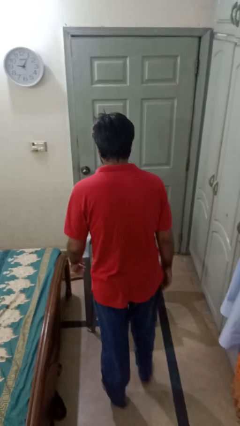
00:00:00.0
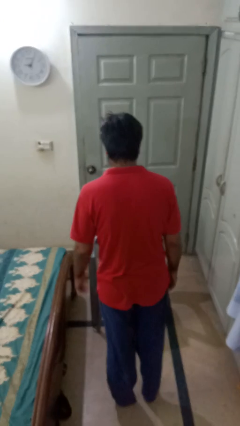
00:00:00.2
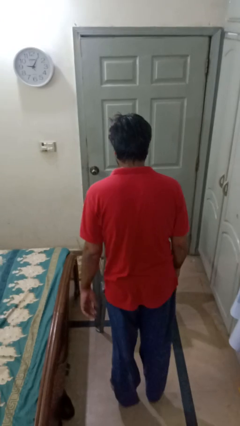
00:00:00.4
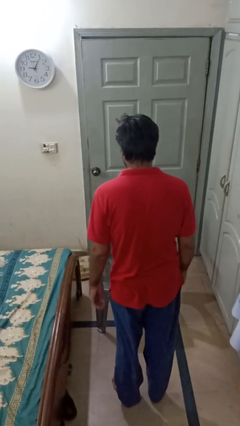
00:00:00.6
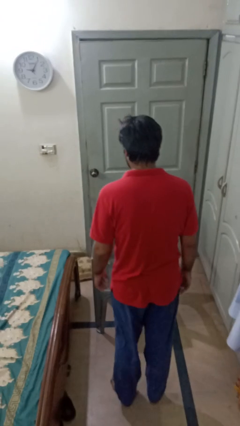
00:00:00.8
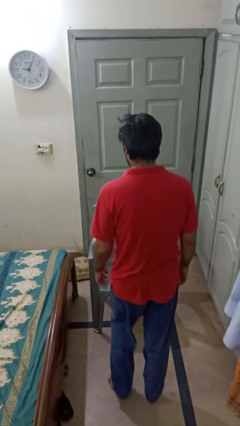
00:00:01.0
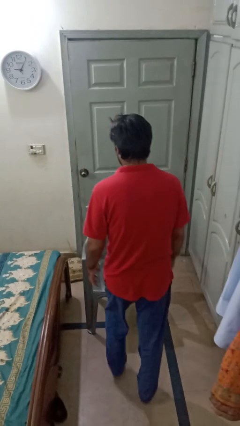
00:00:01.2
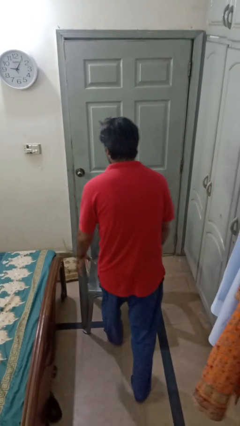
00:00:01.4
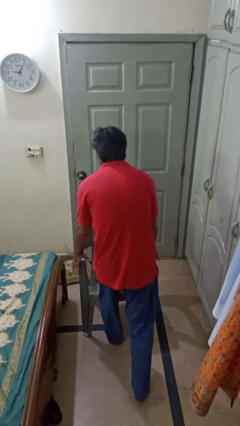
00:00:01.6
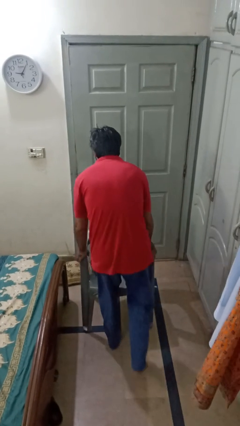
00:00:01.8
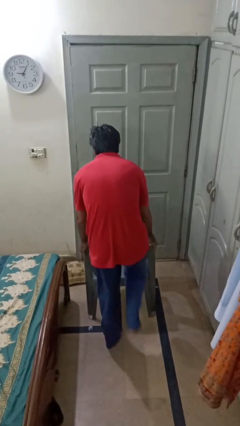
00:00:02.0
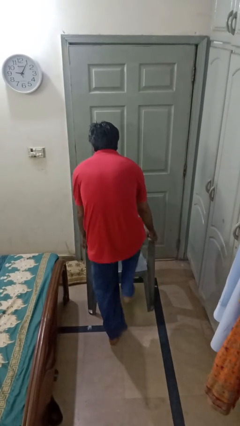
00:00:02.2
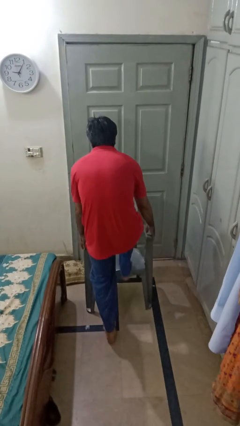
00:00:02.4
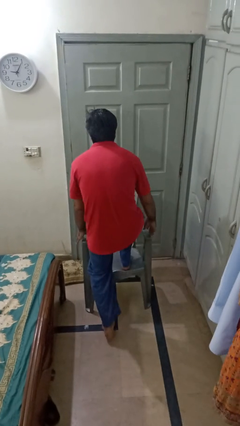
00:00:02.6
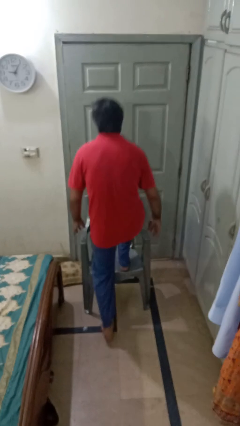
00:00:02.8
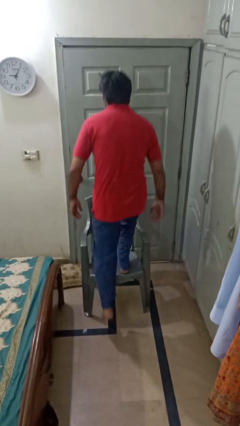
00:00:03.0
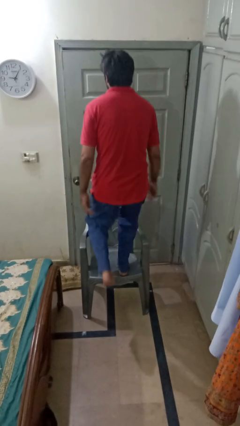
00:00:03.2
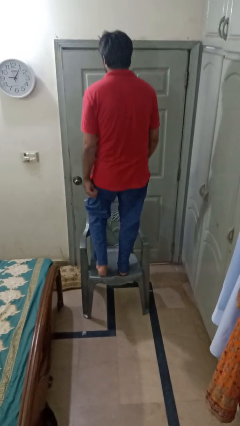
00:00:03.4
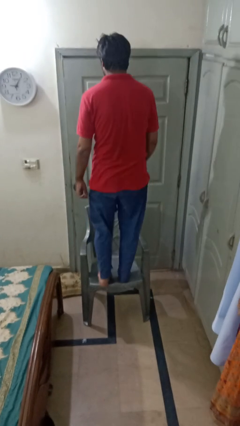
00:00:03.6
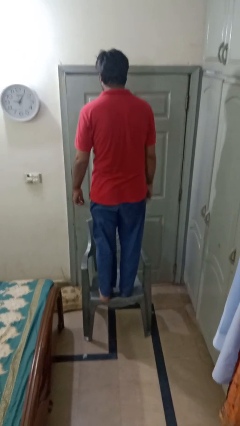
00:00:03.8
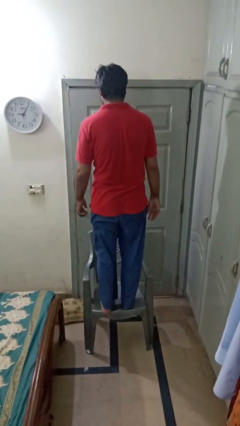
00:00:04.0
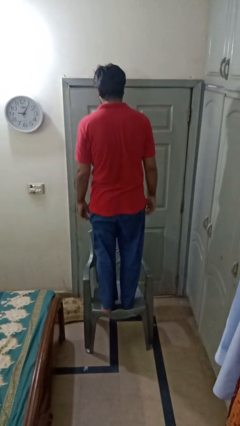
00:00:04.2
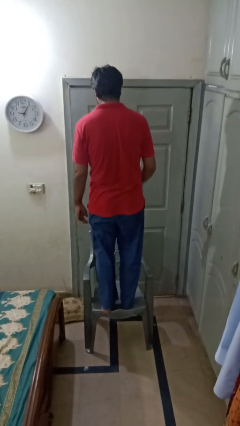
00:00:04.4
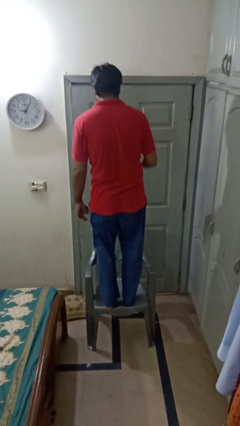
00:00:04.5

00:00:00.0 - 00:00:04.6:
person climbs on chair

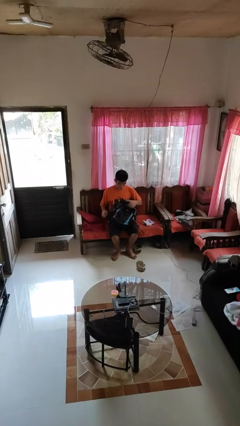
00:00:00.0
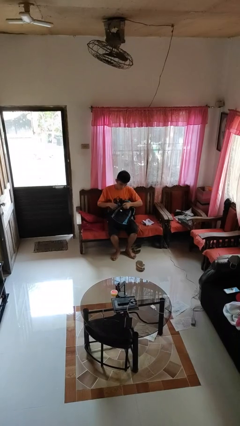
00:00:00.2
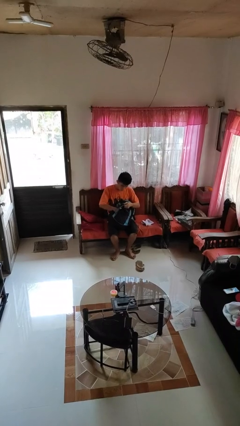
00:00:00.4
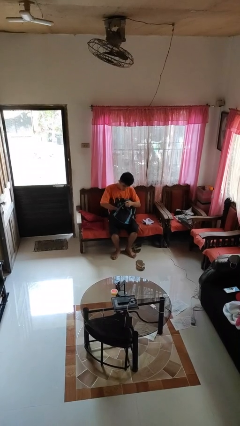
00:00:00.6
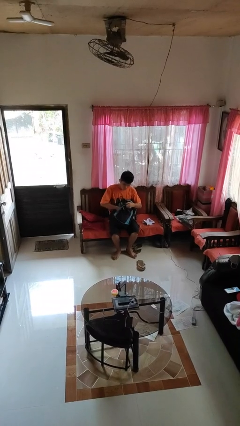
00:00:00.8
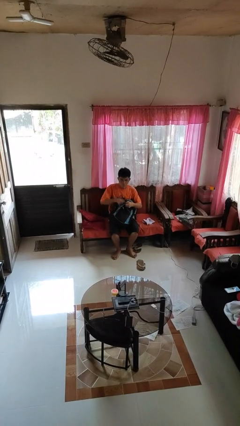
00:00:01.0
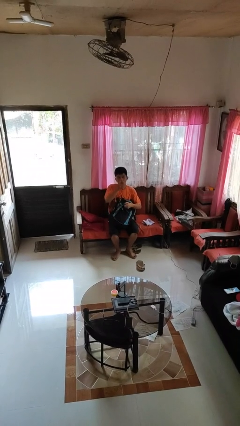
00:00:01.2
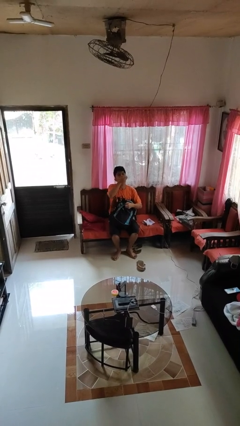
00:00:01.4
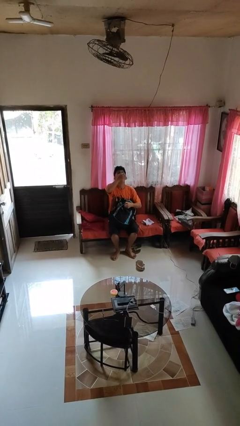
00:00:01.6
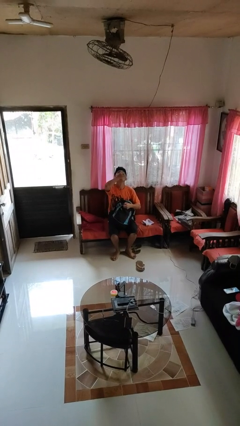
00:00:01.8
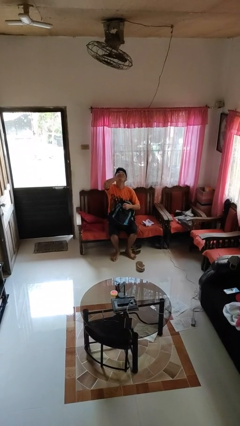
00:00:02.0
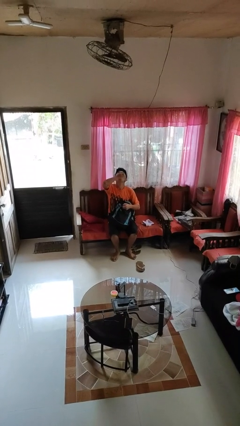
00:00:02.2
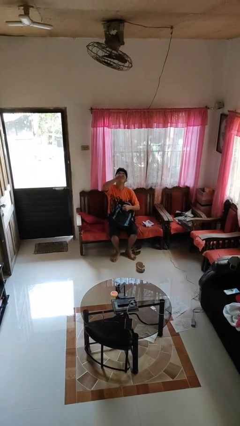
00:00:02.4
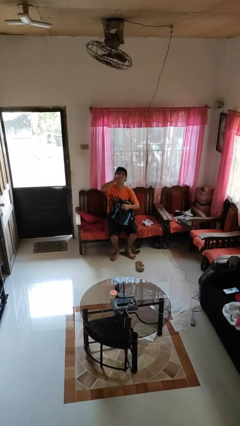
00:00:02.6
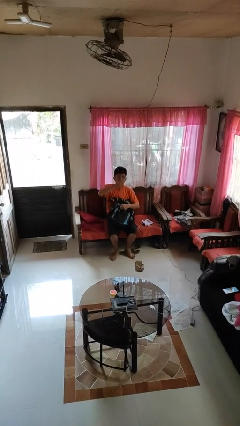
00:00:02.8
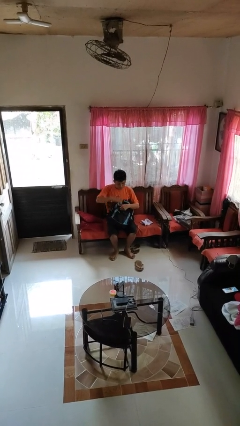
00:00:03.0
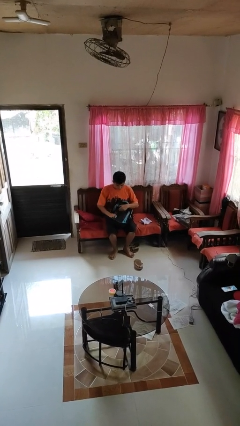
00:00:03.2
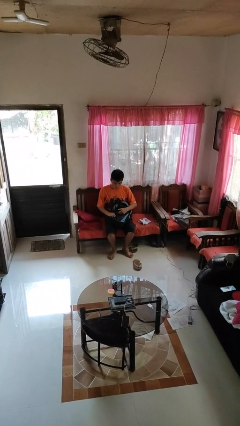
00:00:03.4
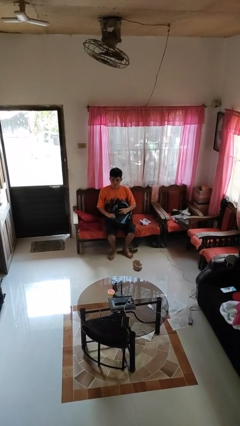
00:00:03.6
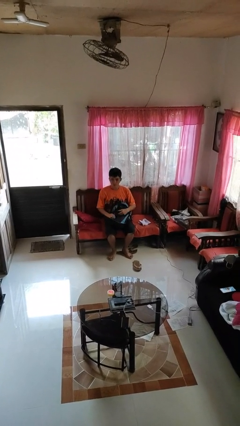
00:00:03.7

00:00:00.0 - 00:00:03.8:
person eats snack from bag

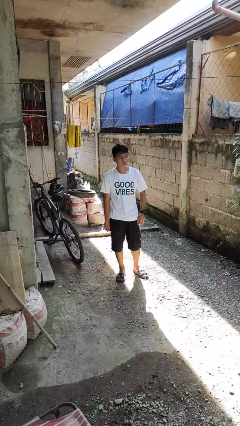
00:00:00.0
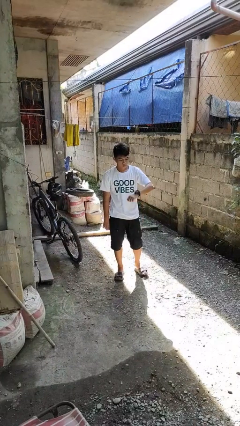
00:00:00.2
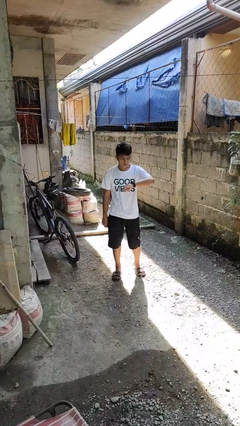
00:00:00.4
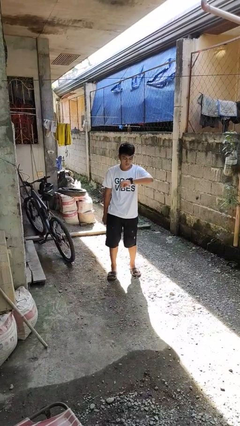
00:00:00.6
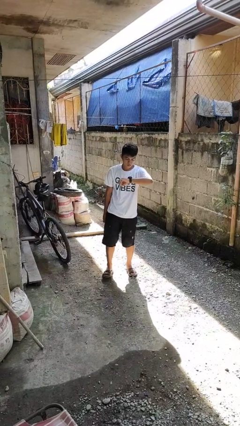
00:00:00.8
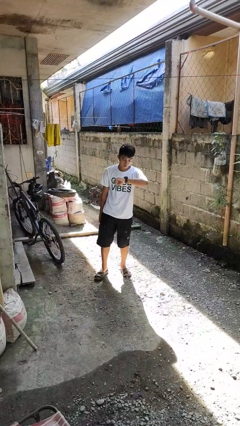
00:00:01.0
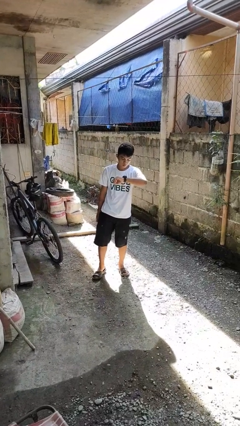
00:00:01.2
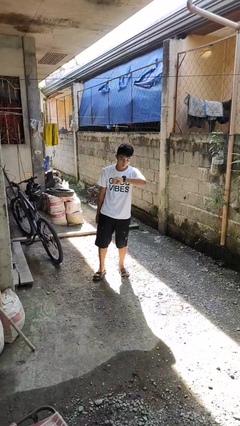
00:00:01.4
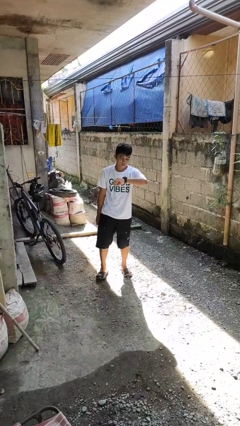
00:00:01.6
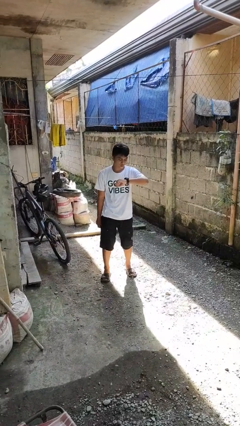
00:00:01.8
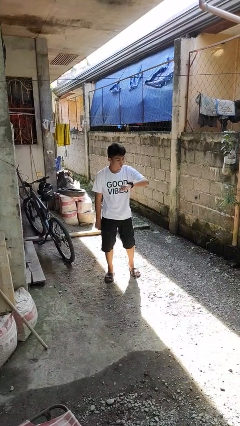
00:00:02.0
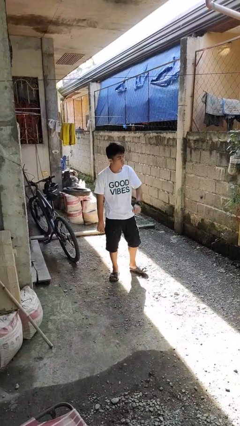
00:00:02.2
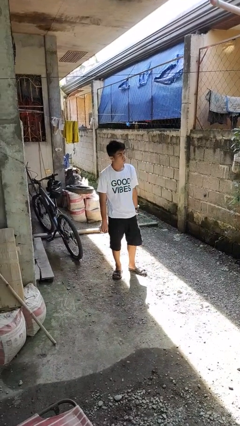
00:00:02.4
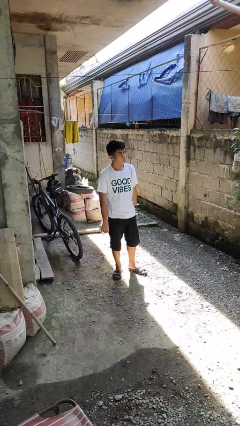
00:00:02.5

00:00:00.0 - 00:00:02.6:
person looks at wristwatch

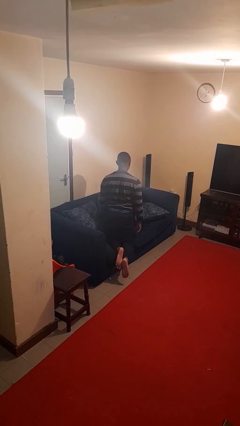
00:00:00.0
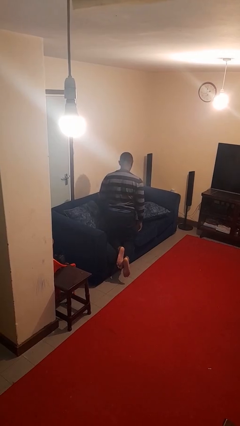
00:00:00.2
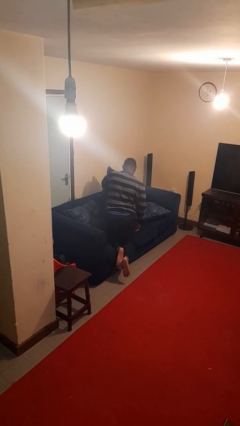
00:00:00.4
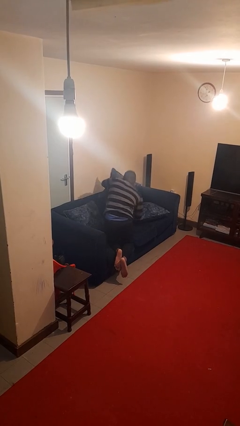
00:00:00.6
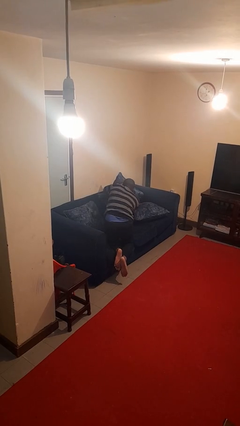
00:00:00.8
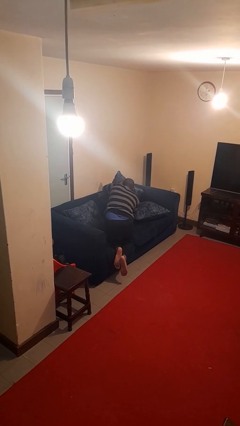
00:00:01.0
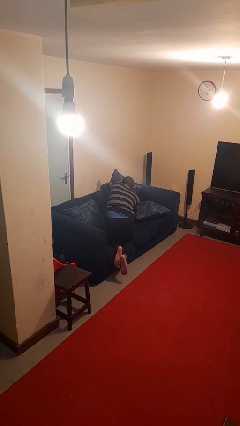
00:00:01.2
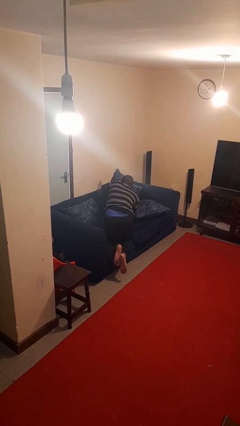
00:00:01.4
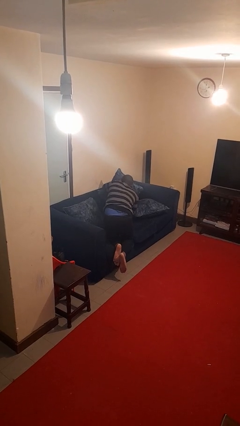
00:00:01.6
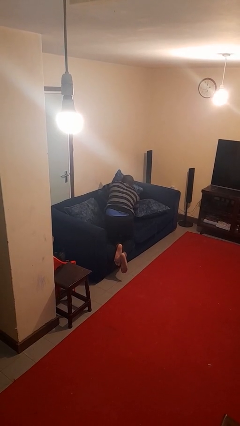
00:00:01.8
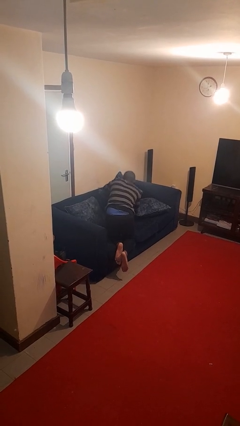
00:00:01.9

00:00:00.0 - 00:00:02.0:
person searches in couch

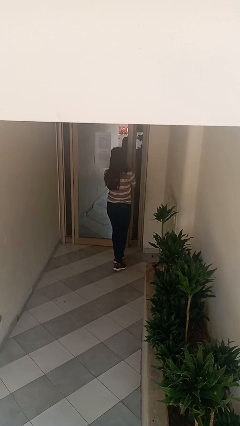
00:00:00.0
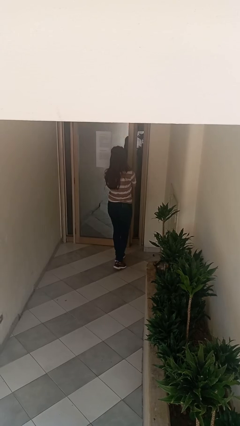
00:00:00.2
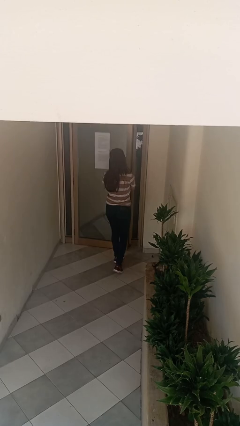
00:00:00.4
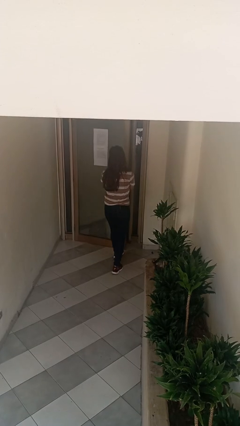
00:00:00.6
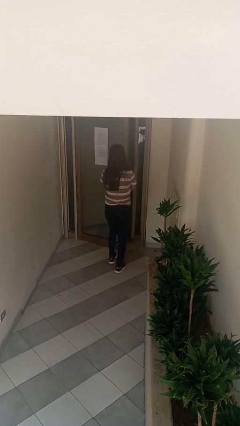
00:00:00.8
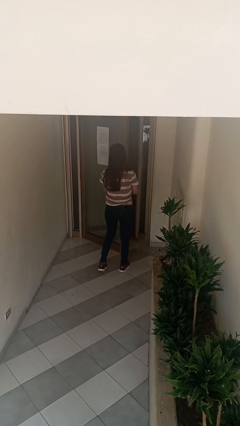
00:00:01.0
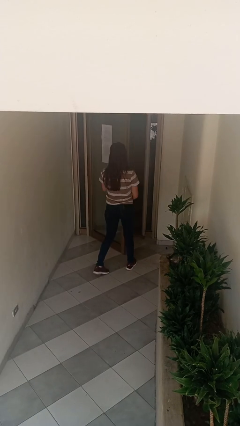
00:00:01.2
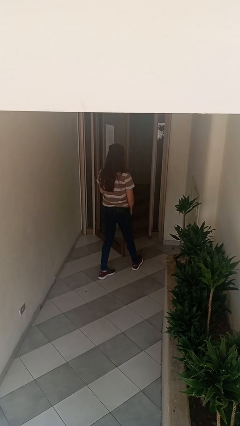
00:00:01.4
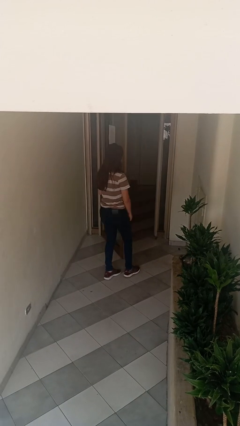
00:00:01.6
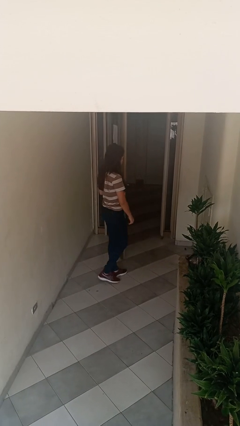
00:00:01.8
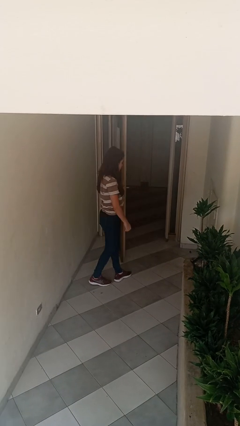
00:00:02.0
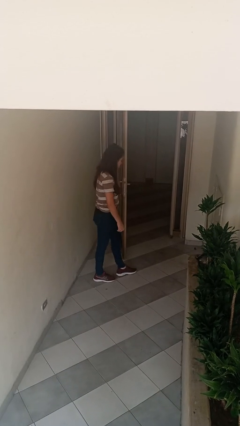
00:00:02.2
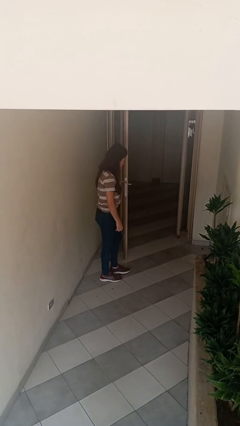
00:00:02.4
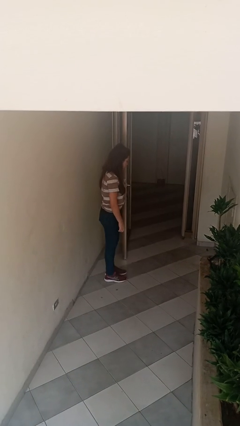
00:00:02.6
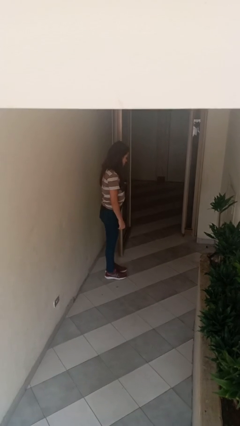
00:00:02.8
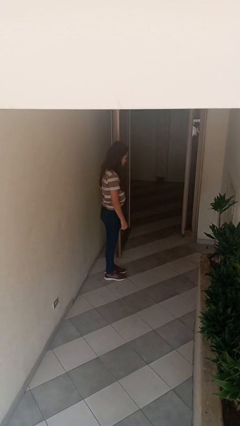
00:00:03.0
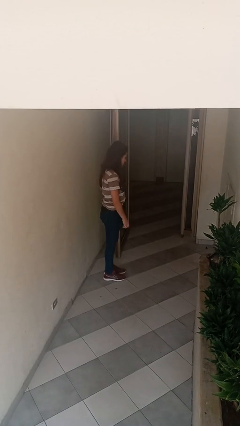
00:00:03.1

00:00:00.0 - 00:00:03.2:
person opens facility door

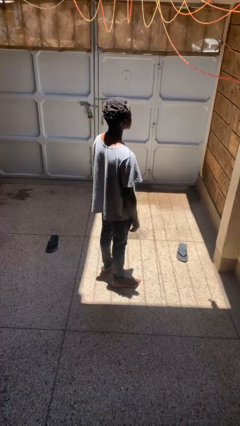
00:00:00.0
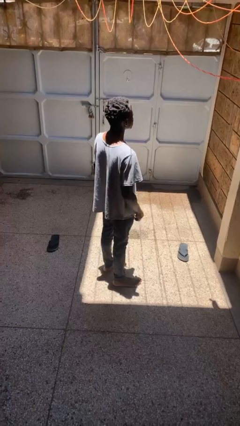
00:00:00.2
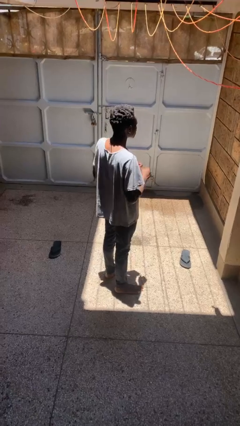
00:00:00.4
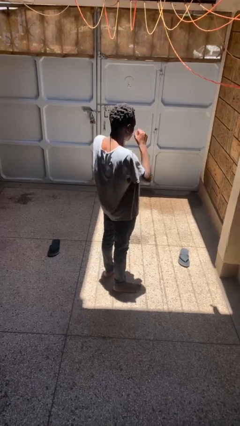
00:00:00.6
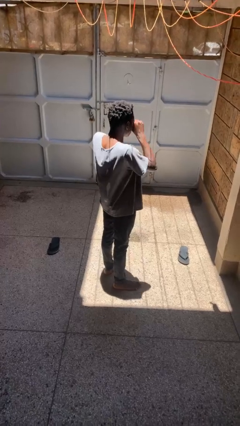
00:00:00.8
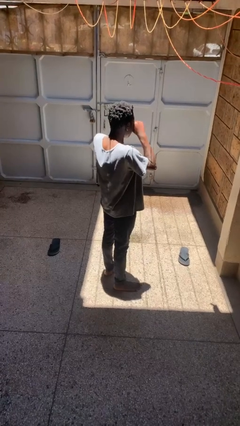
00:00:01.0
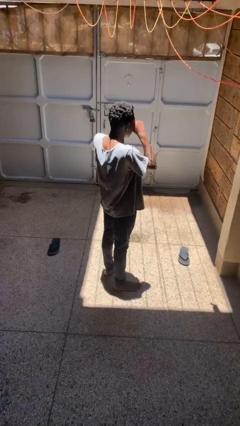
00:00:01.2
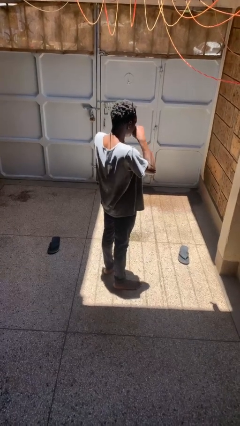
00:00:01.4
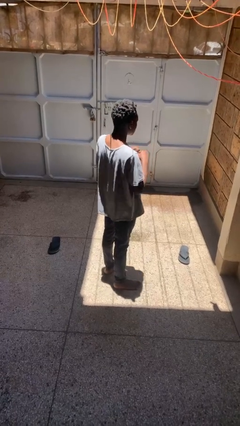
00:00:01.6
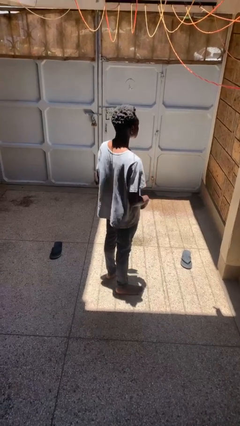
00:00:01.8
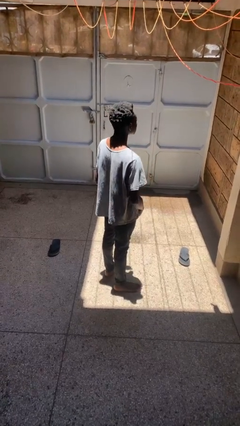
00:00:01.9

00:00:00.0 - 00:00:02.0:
person rubs eyes
